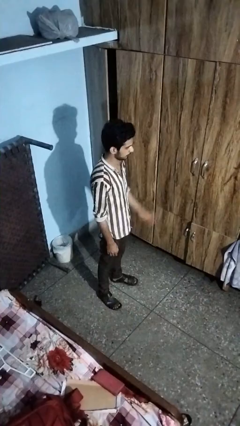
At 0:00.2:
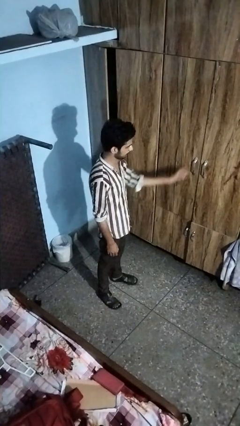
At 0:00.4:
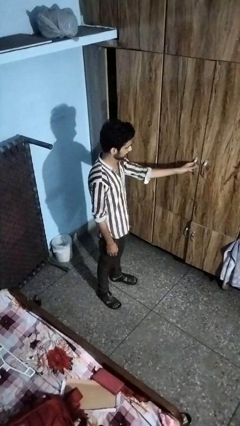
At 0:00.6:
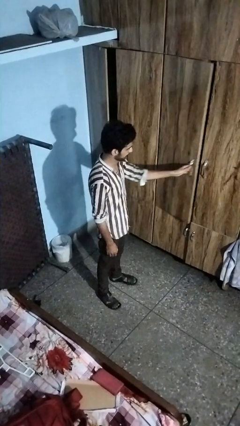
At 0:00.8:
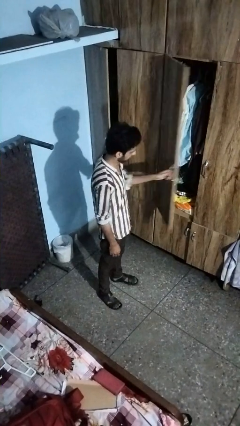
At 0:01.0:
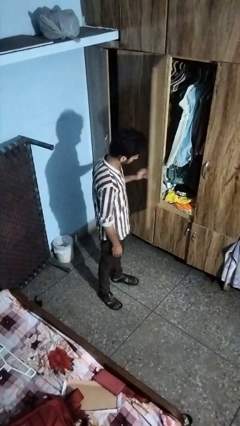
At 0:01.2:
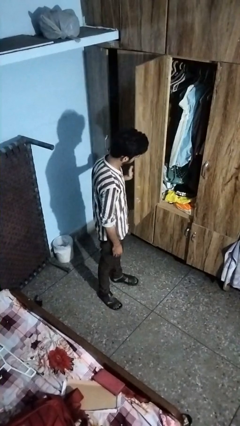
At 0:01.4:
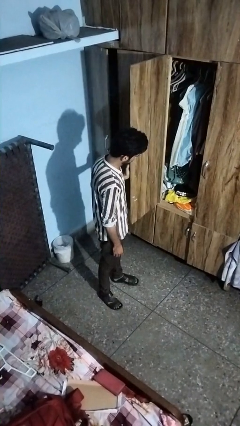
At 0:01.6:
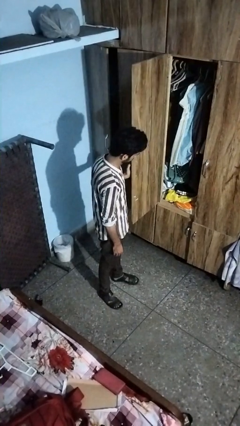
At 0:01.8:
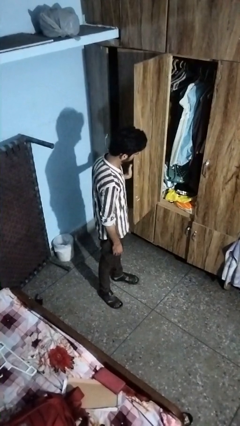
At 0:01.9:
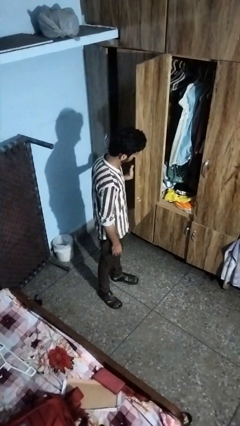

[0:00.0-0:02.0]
person opens closet door

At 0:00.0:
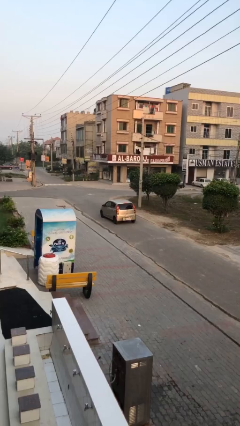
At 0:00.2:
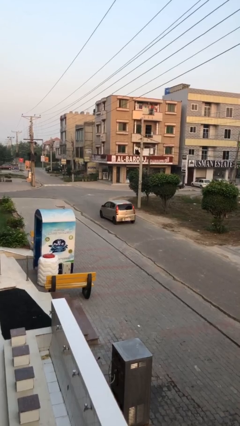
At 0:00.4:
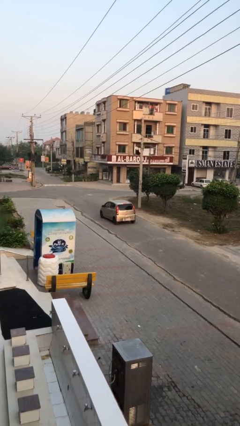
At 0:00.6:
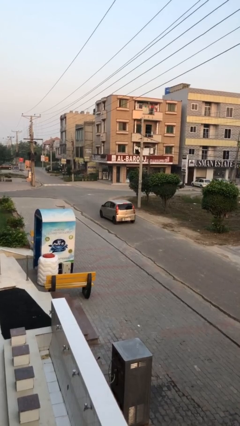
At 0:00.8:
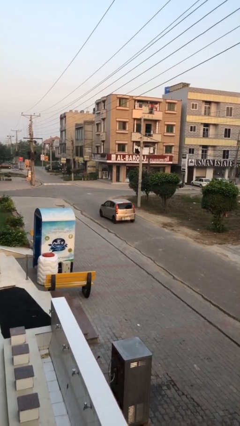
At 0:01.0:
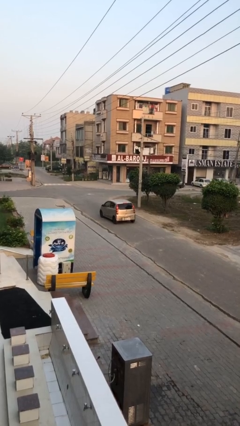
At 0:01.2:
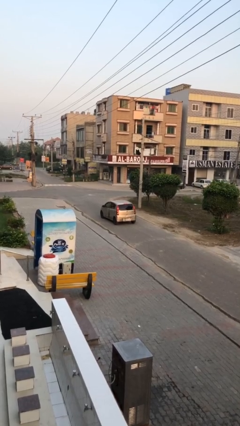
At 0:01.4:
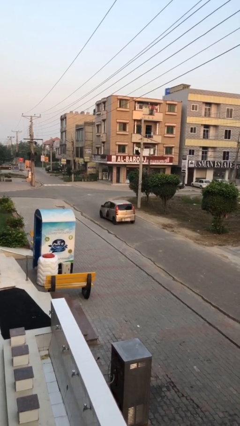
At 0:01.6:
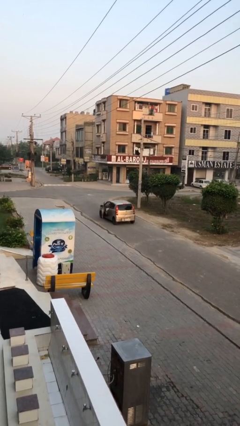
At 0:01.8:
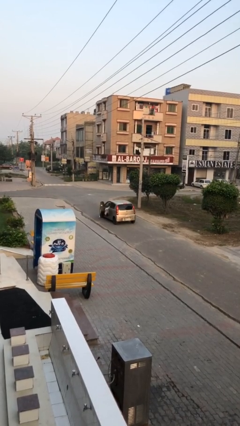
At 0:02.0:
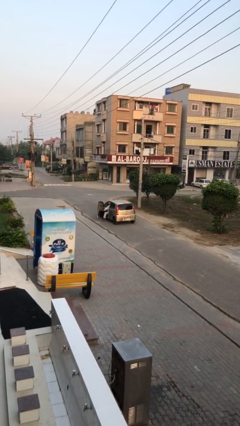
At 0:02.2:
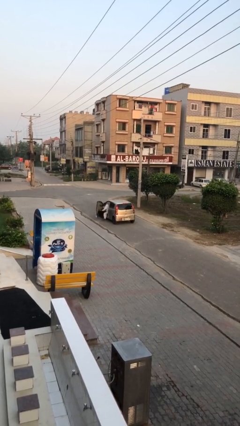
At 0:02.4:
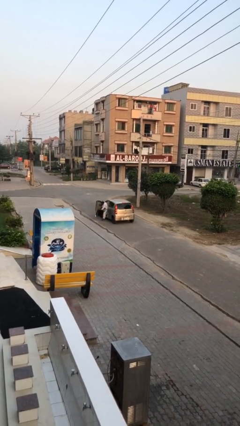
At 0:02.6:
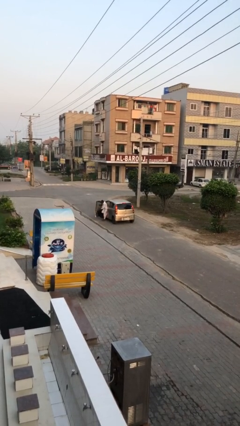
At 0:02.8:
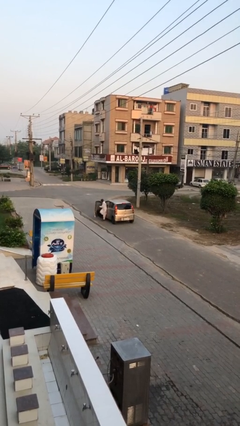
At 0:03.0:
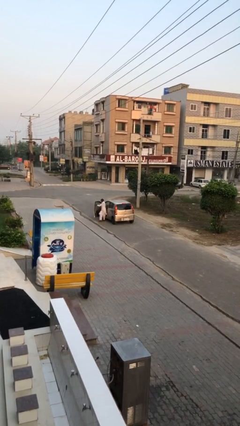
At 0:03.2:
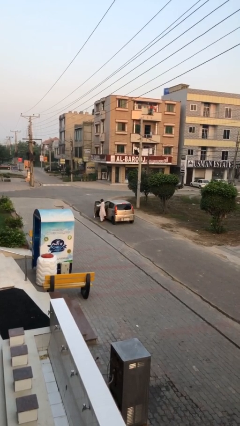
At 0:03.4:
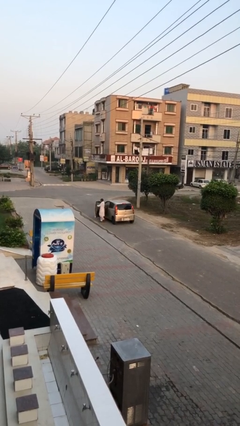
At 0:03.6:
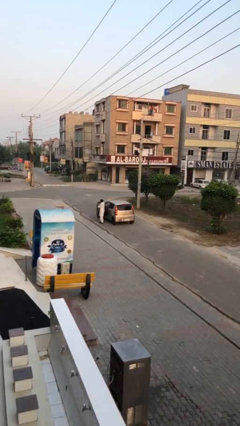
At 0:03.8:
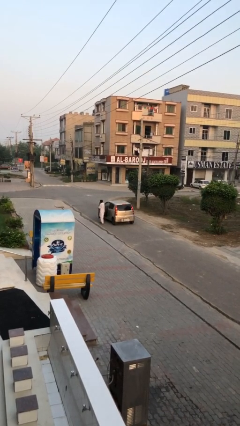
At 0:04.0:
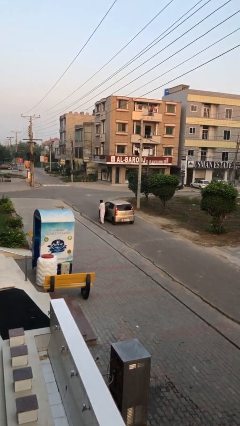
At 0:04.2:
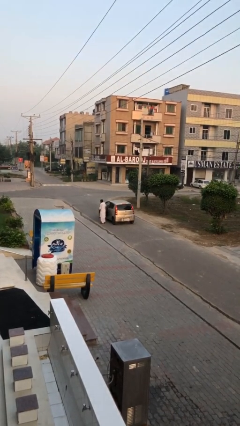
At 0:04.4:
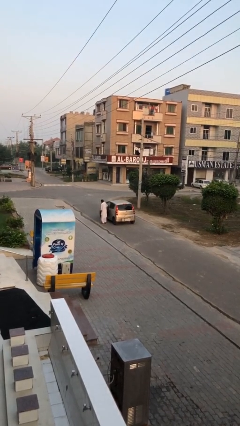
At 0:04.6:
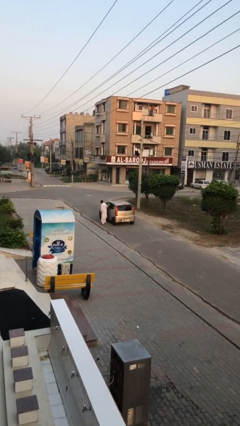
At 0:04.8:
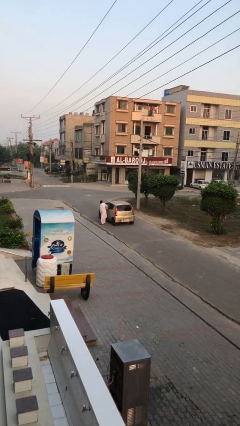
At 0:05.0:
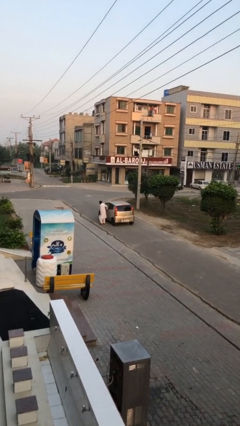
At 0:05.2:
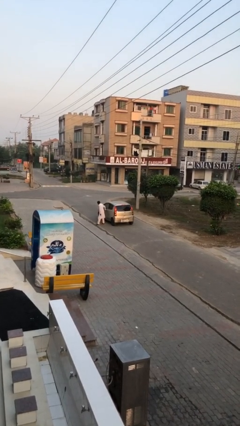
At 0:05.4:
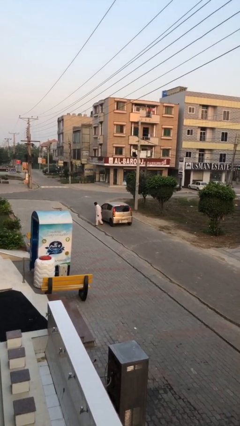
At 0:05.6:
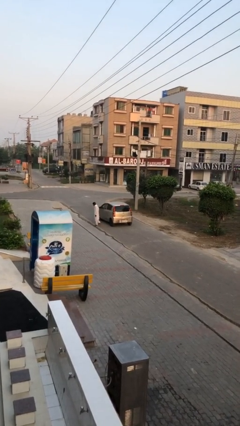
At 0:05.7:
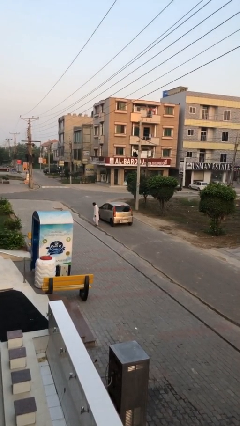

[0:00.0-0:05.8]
car drops off person

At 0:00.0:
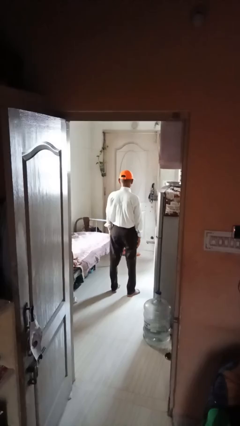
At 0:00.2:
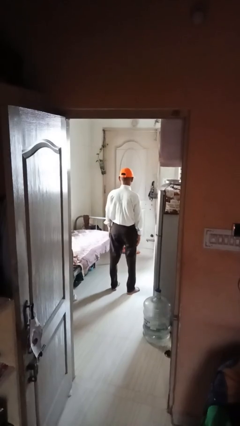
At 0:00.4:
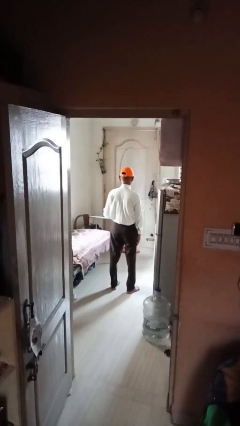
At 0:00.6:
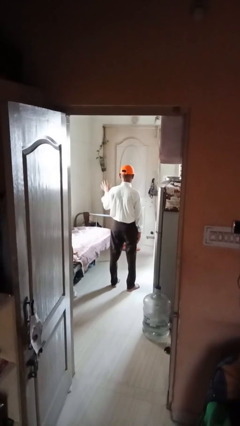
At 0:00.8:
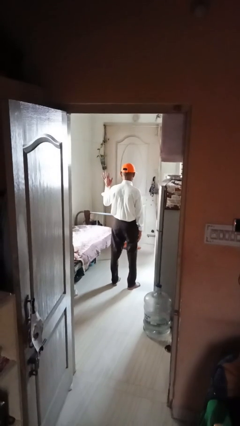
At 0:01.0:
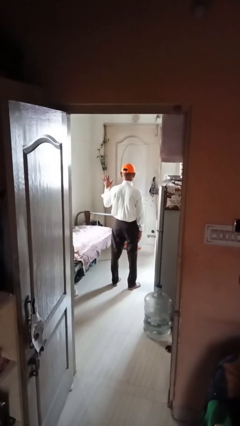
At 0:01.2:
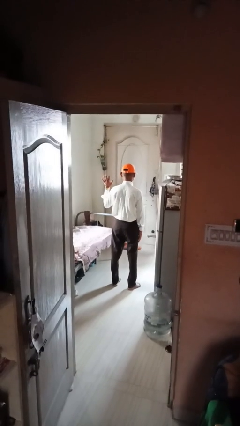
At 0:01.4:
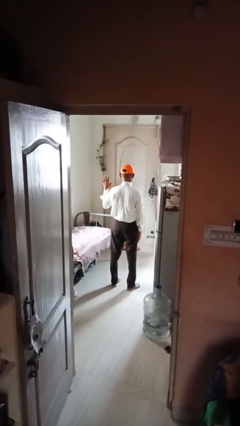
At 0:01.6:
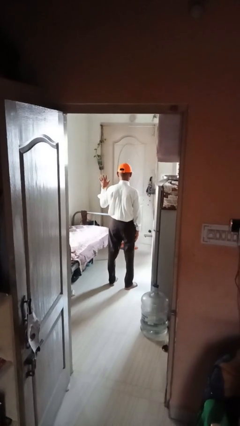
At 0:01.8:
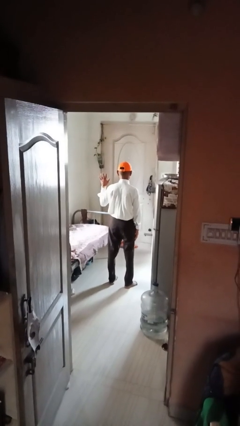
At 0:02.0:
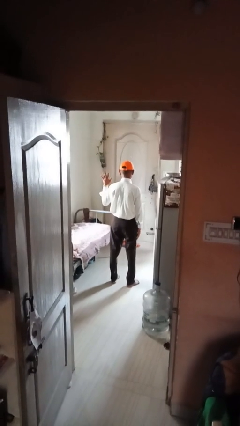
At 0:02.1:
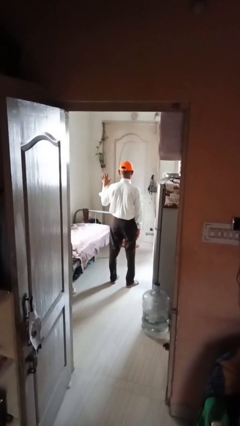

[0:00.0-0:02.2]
person gestures number five

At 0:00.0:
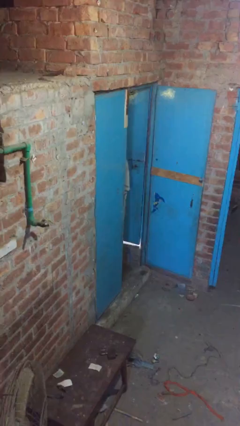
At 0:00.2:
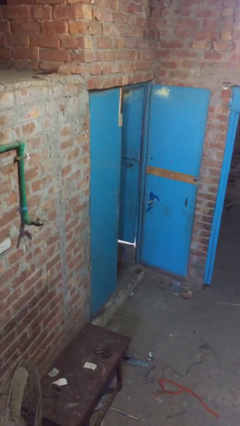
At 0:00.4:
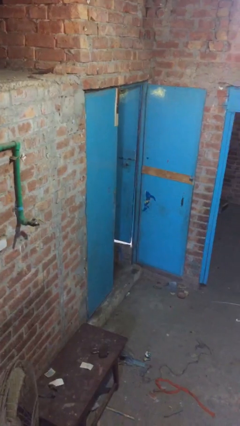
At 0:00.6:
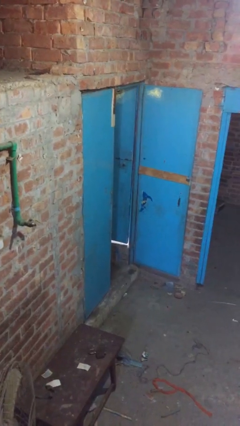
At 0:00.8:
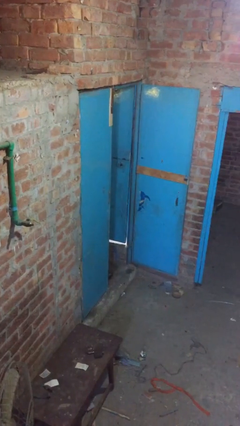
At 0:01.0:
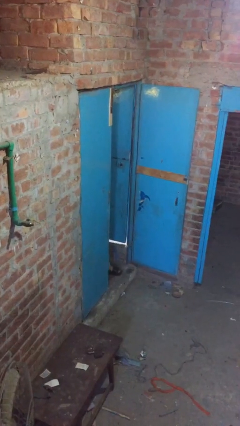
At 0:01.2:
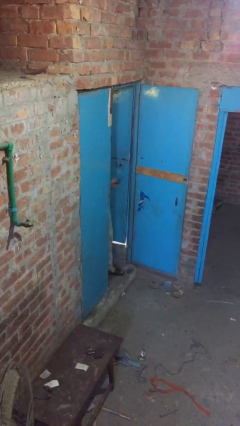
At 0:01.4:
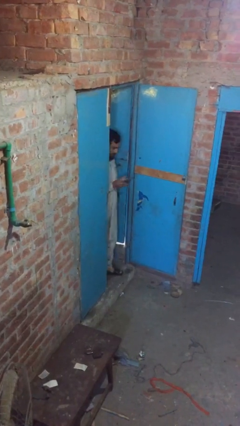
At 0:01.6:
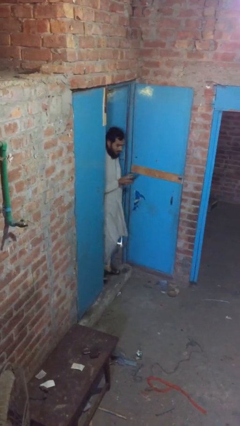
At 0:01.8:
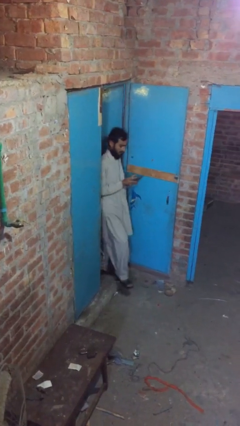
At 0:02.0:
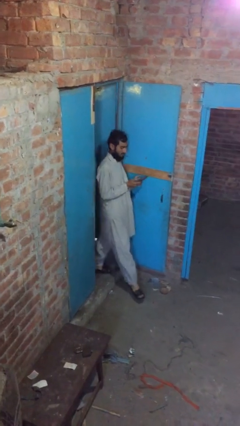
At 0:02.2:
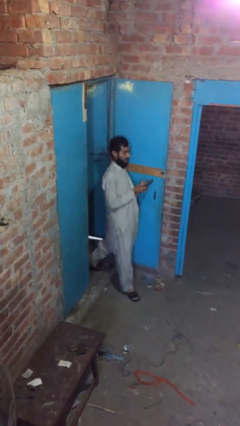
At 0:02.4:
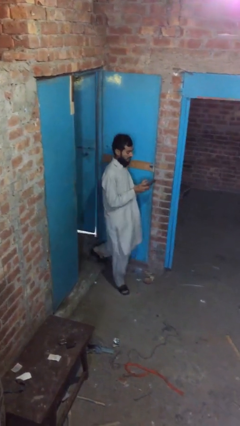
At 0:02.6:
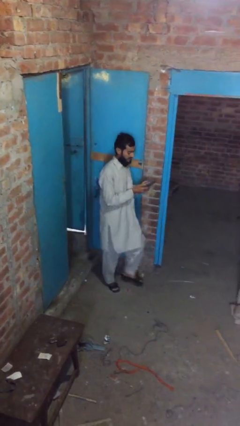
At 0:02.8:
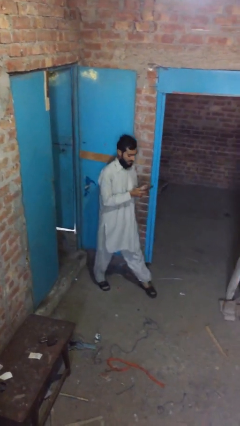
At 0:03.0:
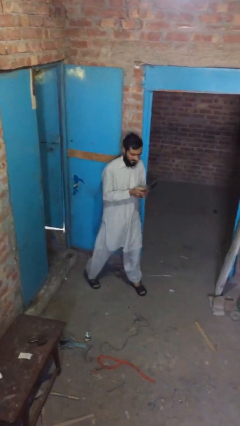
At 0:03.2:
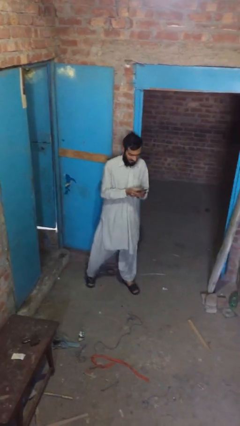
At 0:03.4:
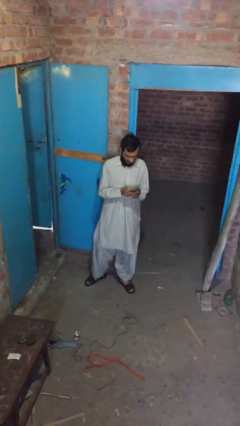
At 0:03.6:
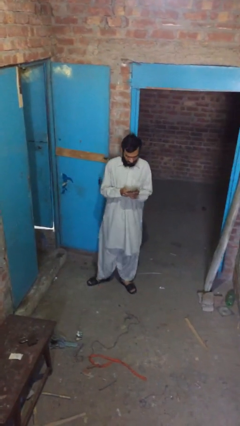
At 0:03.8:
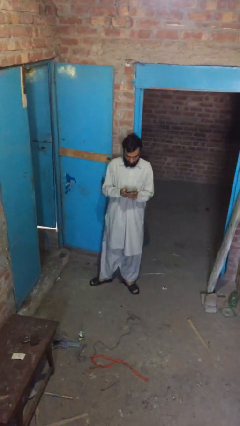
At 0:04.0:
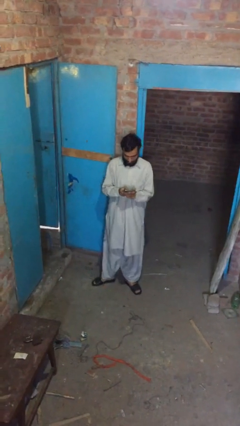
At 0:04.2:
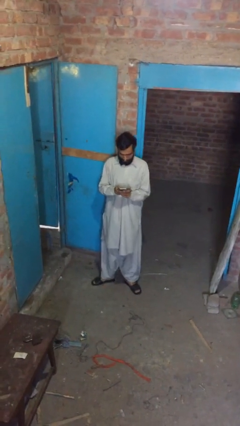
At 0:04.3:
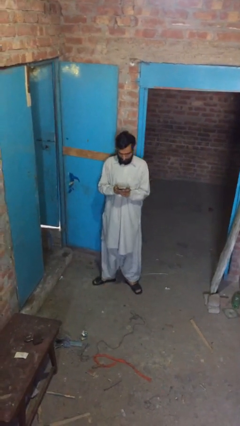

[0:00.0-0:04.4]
person enters scene through structure

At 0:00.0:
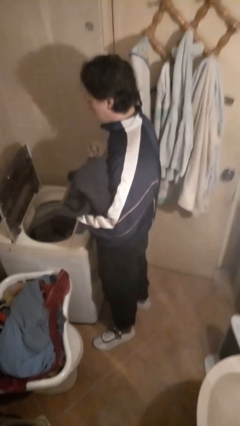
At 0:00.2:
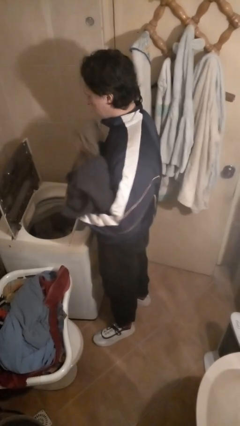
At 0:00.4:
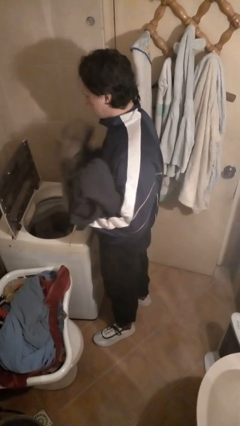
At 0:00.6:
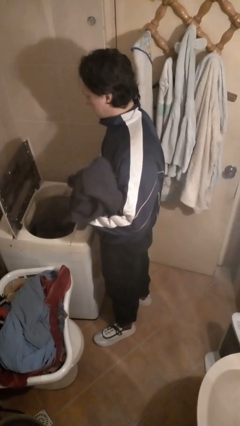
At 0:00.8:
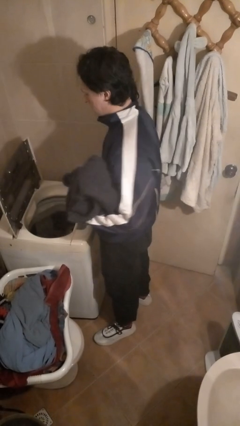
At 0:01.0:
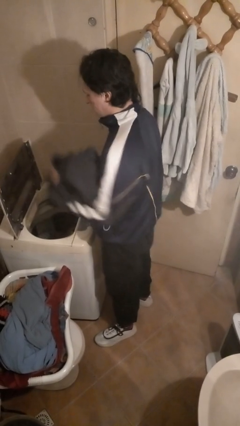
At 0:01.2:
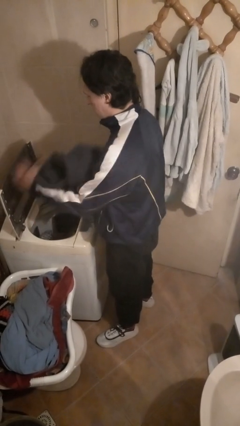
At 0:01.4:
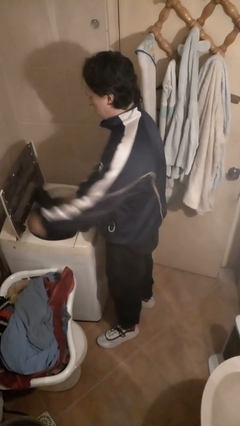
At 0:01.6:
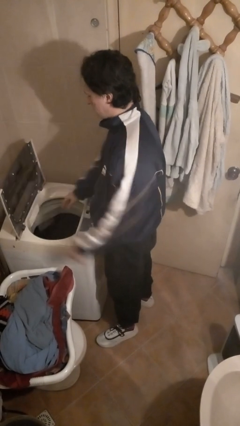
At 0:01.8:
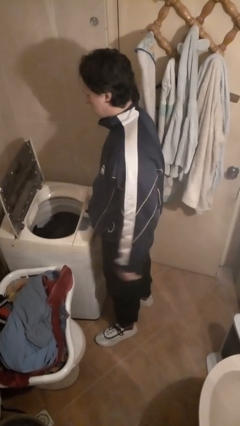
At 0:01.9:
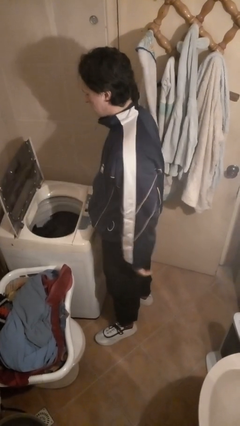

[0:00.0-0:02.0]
person loads clotheswasher

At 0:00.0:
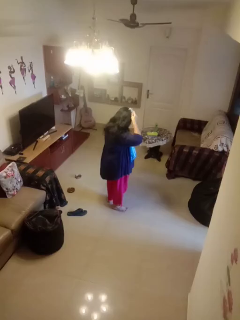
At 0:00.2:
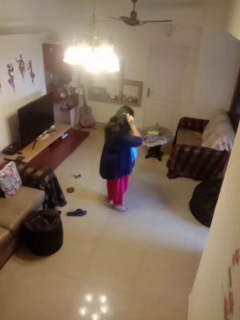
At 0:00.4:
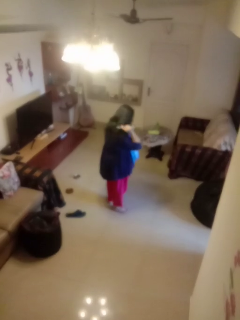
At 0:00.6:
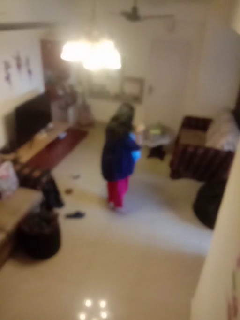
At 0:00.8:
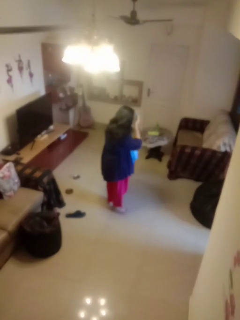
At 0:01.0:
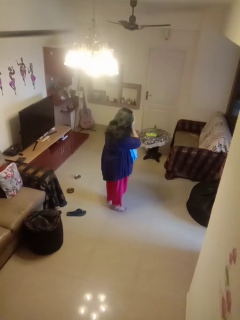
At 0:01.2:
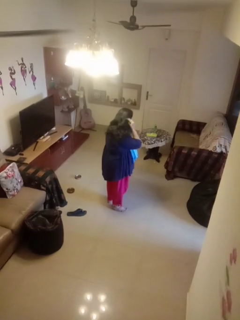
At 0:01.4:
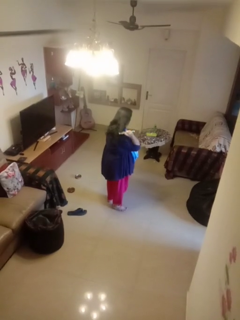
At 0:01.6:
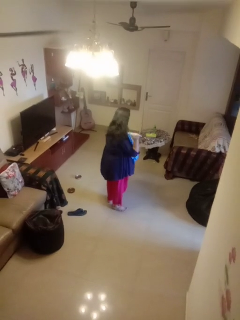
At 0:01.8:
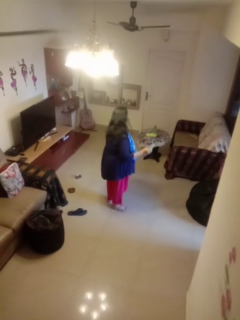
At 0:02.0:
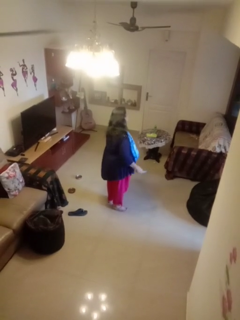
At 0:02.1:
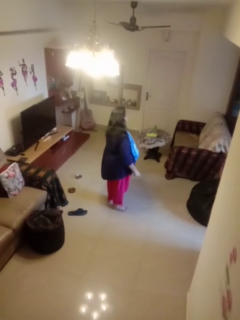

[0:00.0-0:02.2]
person brushes hair
